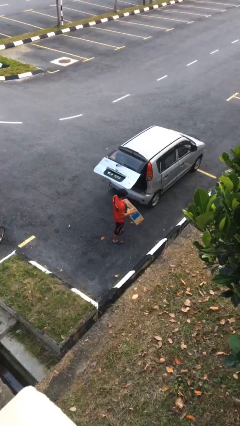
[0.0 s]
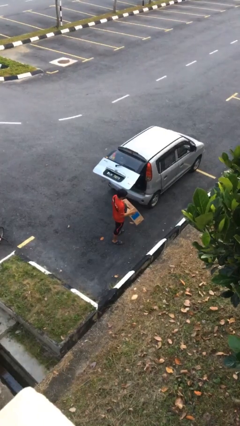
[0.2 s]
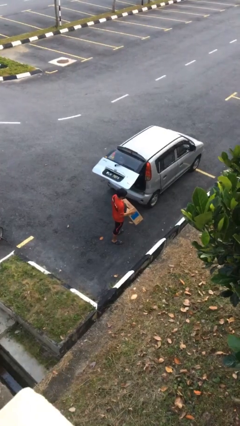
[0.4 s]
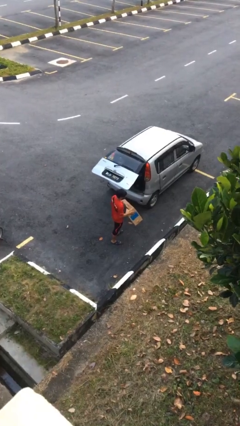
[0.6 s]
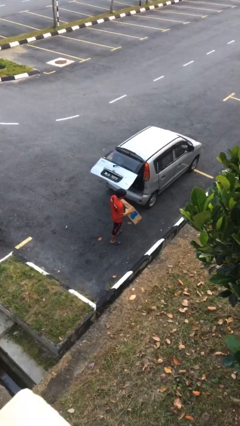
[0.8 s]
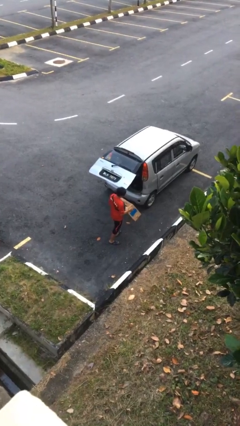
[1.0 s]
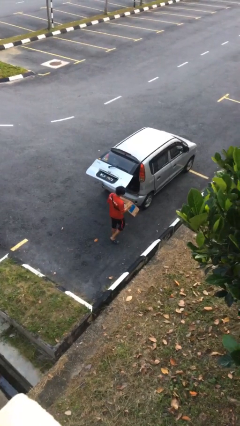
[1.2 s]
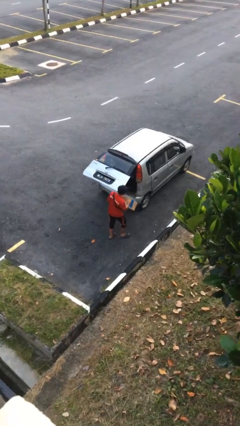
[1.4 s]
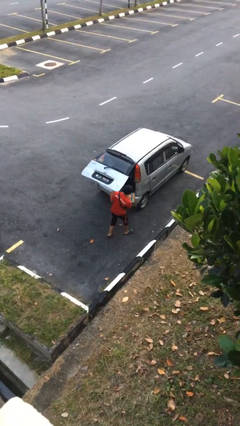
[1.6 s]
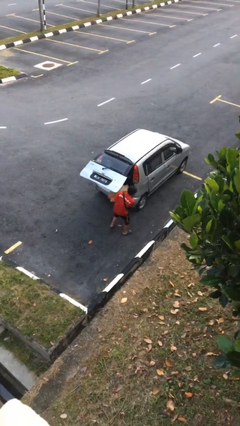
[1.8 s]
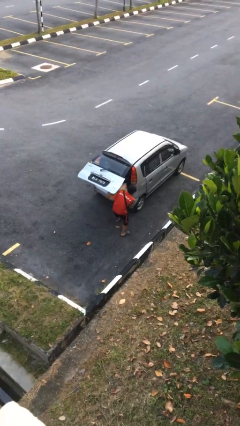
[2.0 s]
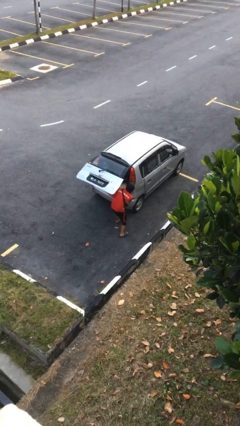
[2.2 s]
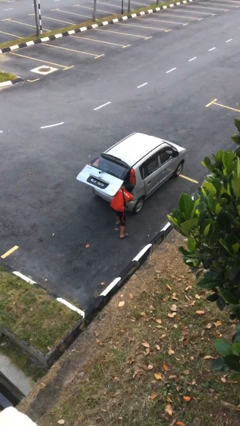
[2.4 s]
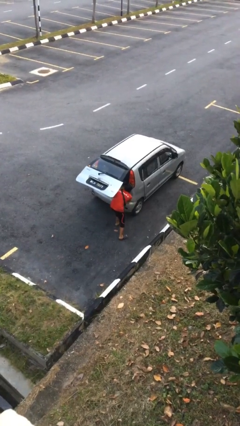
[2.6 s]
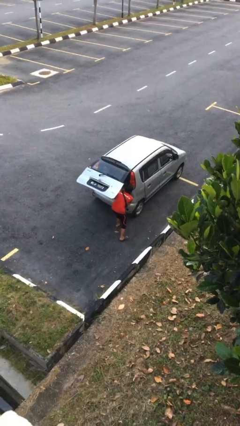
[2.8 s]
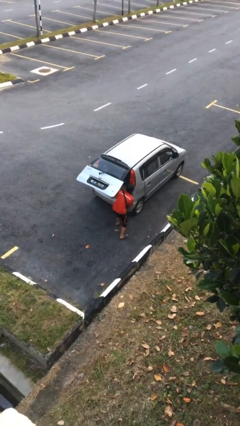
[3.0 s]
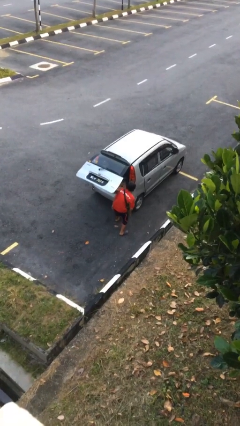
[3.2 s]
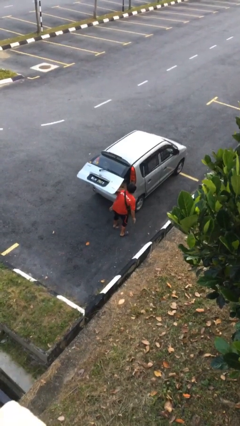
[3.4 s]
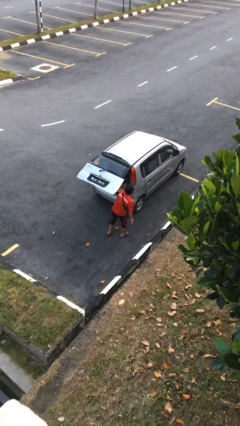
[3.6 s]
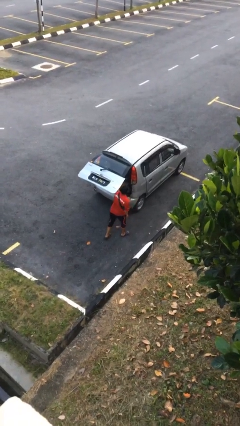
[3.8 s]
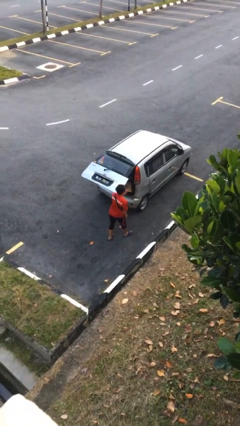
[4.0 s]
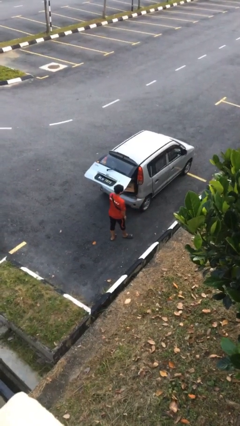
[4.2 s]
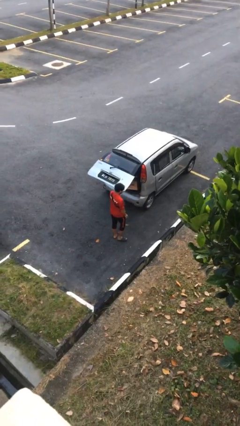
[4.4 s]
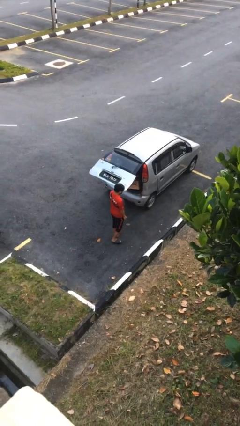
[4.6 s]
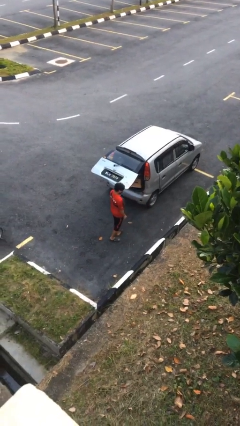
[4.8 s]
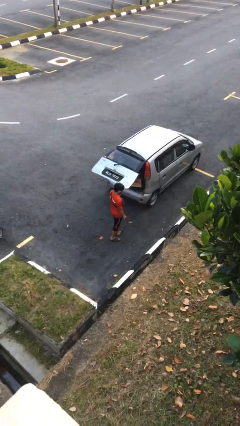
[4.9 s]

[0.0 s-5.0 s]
person loads car

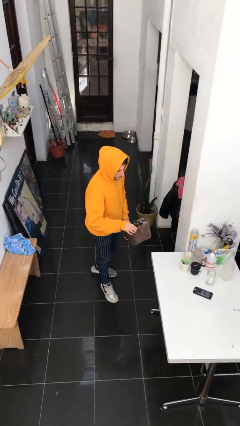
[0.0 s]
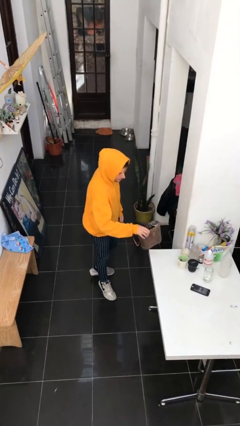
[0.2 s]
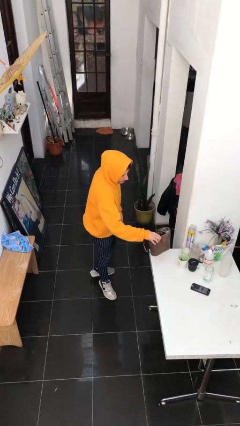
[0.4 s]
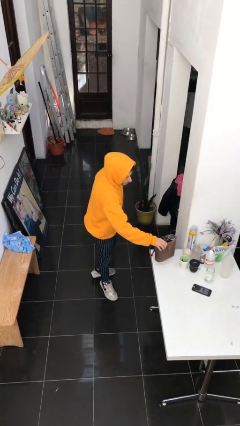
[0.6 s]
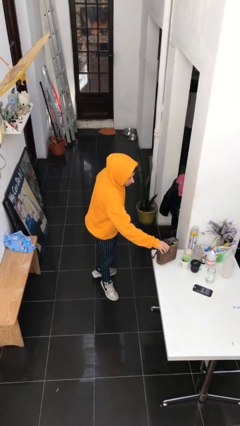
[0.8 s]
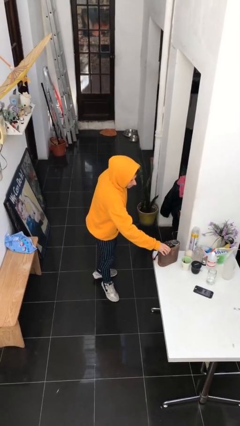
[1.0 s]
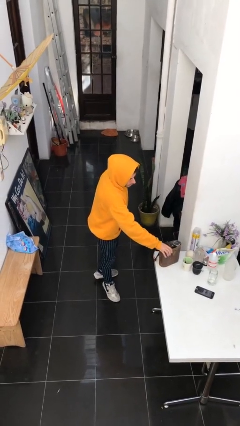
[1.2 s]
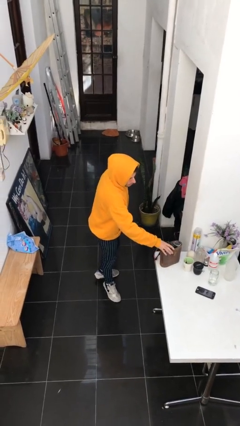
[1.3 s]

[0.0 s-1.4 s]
person puts down object on table

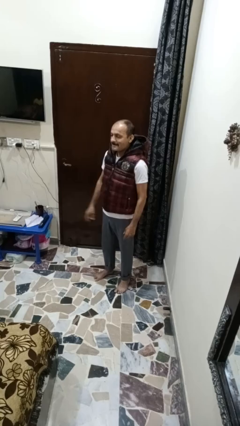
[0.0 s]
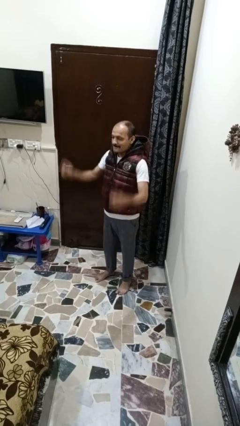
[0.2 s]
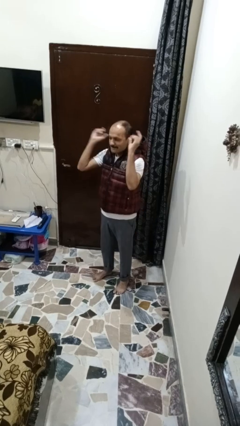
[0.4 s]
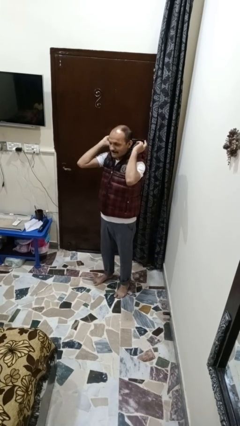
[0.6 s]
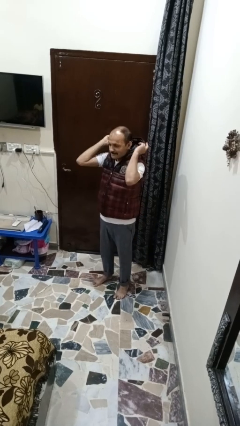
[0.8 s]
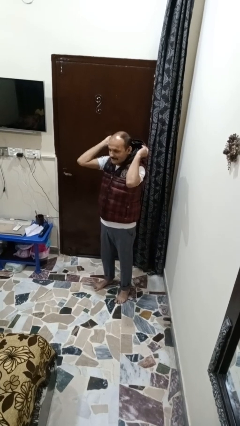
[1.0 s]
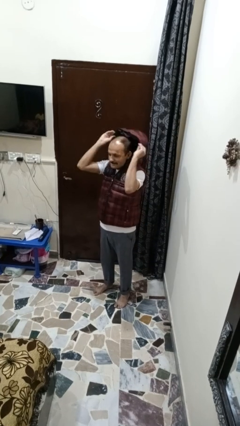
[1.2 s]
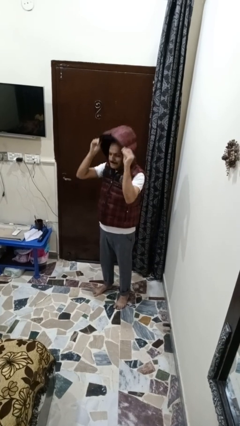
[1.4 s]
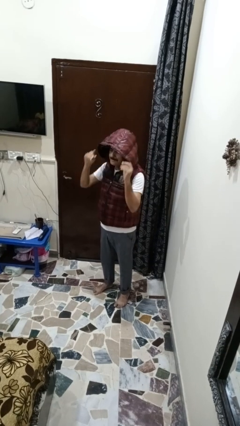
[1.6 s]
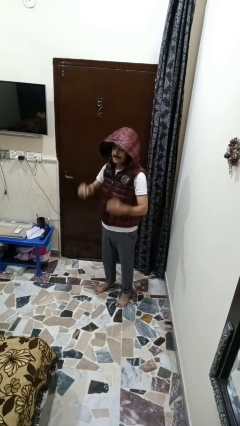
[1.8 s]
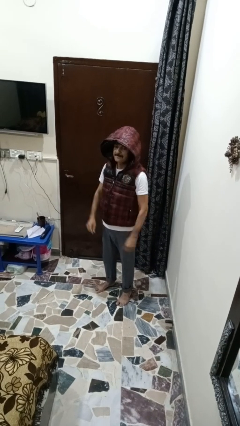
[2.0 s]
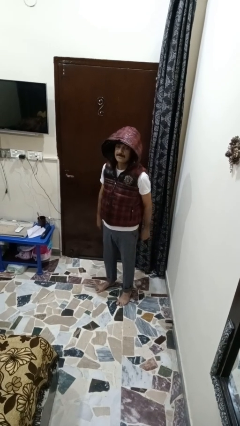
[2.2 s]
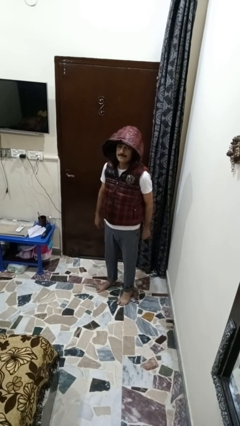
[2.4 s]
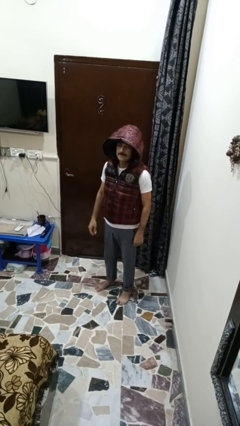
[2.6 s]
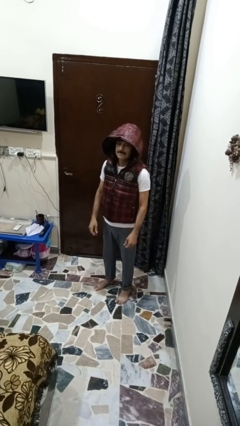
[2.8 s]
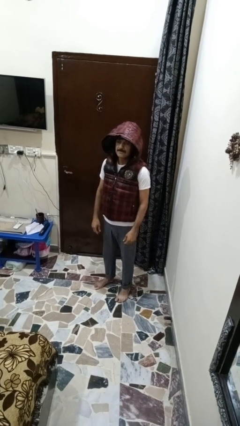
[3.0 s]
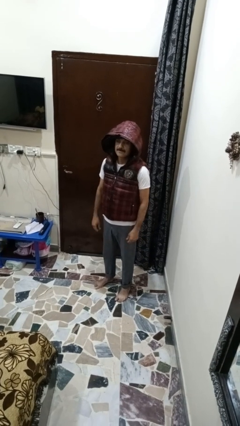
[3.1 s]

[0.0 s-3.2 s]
person puts on hoodie

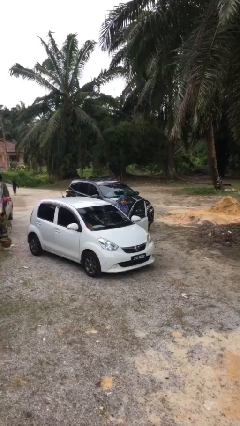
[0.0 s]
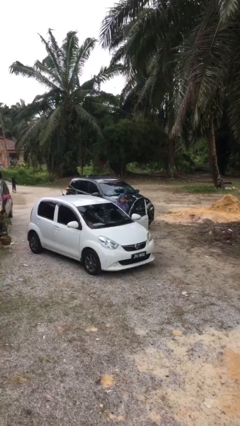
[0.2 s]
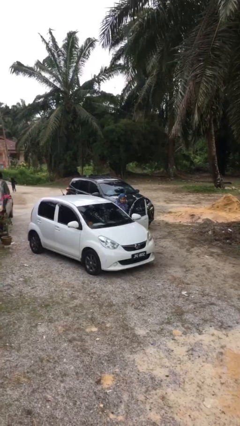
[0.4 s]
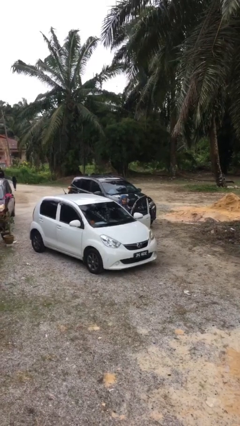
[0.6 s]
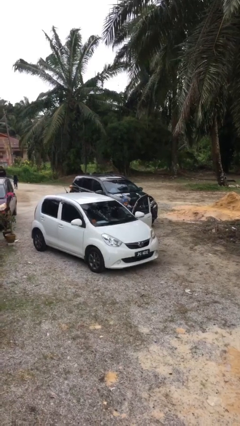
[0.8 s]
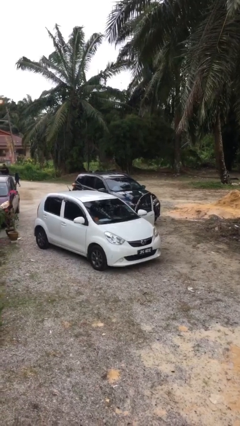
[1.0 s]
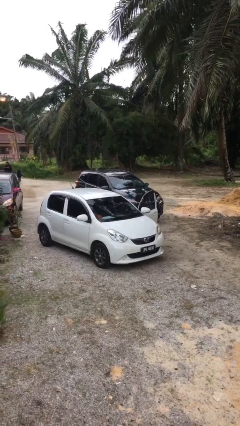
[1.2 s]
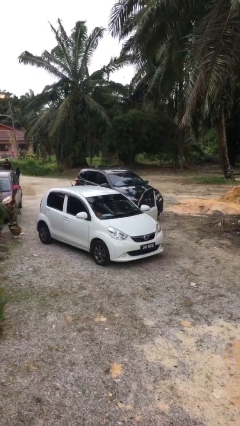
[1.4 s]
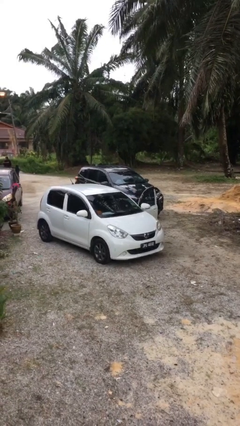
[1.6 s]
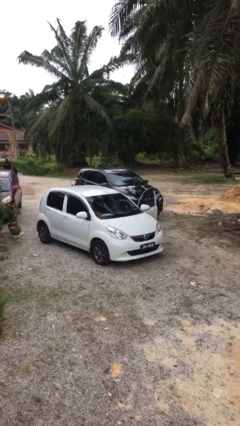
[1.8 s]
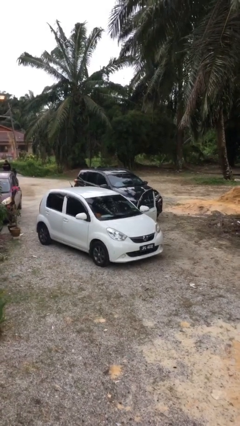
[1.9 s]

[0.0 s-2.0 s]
person enters car

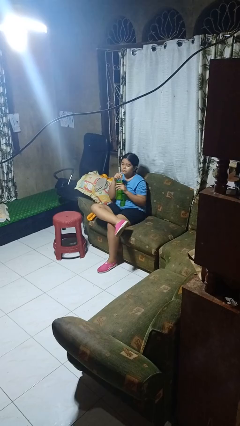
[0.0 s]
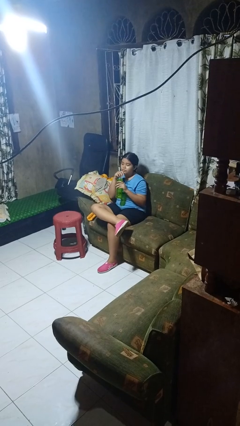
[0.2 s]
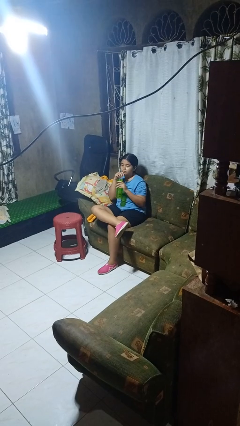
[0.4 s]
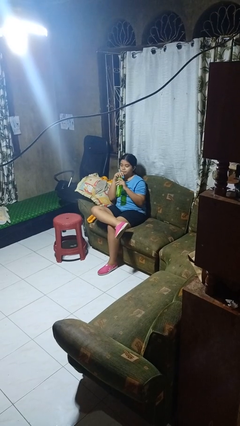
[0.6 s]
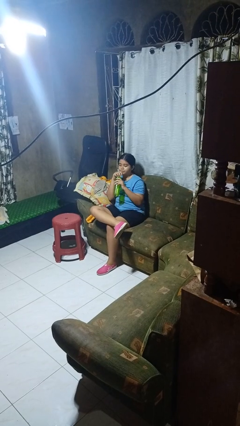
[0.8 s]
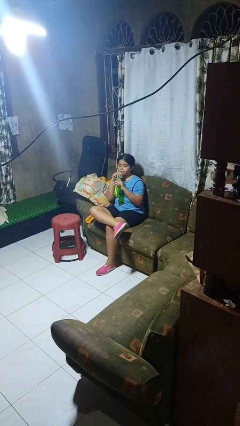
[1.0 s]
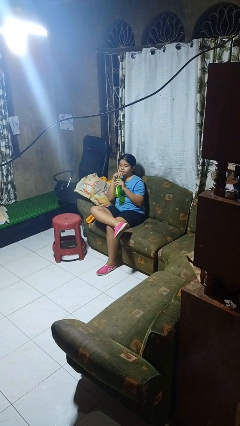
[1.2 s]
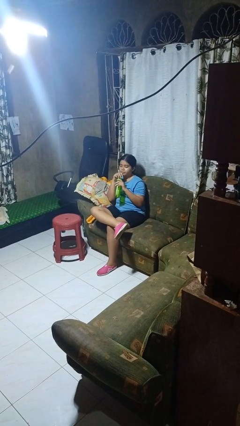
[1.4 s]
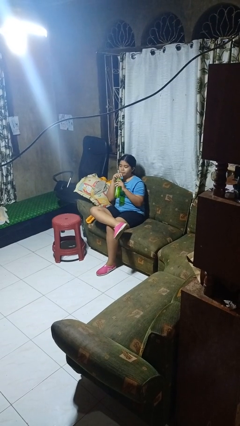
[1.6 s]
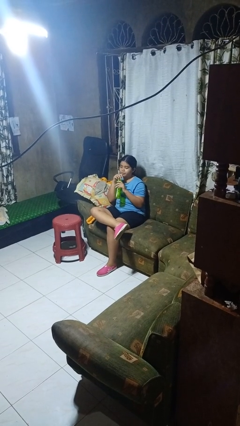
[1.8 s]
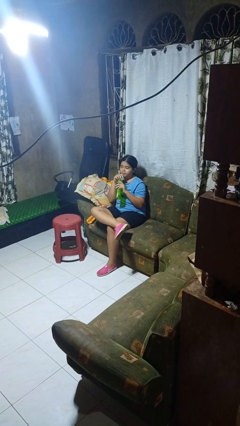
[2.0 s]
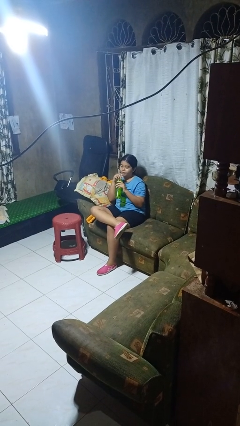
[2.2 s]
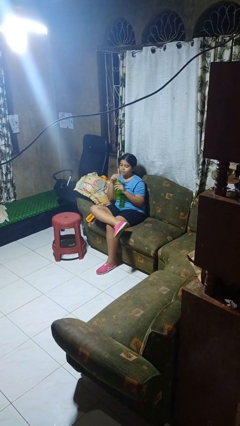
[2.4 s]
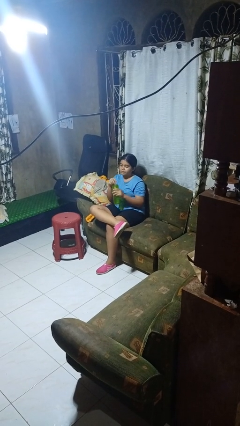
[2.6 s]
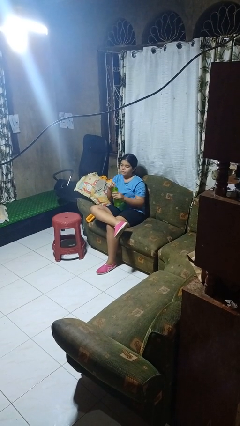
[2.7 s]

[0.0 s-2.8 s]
person drinks from straw

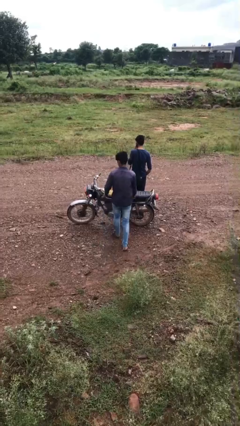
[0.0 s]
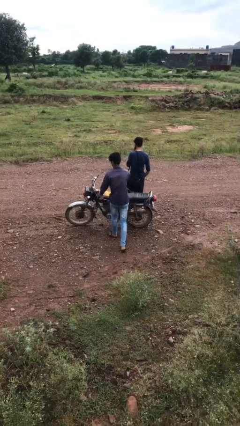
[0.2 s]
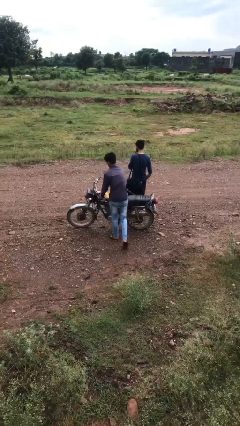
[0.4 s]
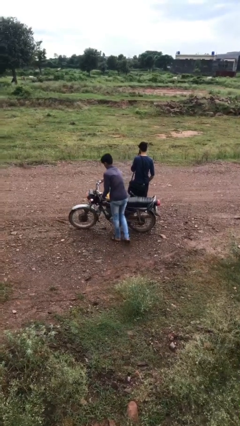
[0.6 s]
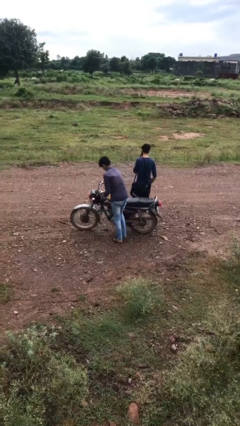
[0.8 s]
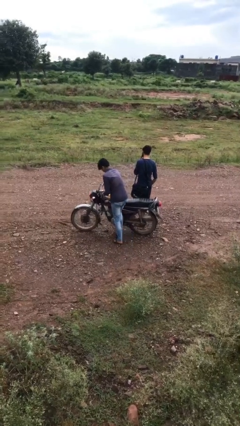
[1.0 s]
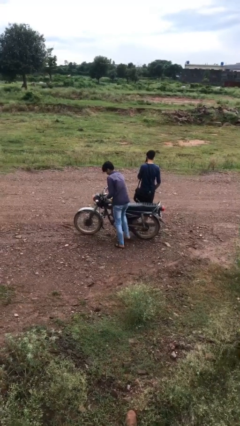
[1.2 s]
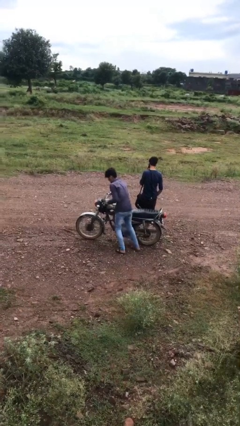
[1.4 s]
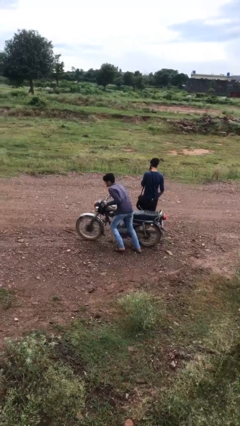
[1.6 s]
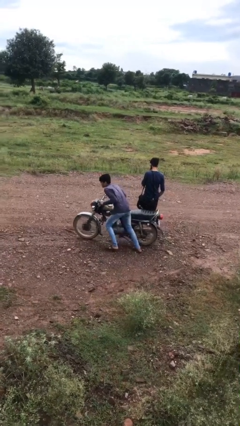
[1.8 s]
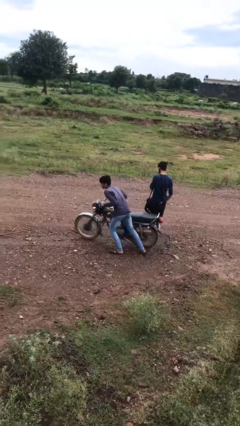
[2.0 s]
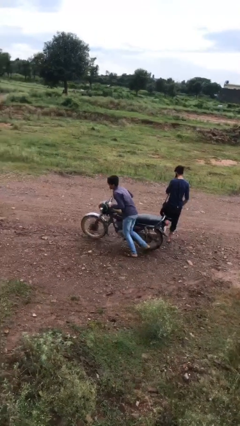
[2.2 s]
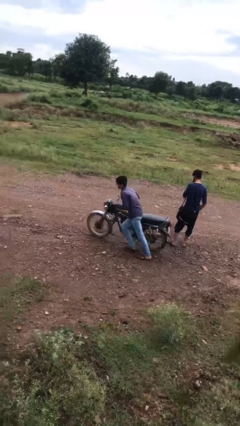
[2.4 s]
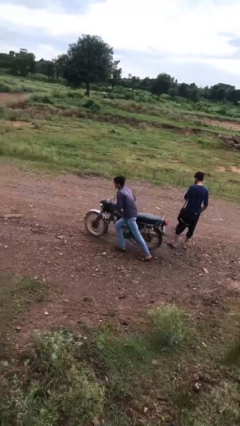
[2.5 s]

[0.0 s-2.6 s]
person steals object from person

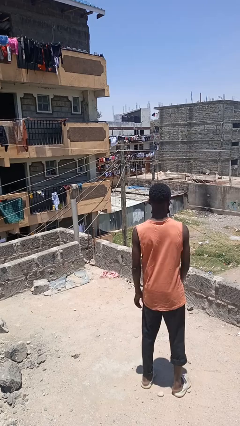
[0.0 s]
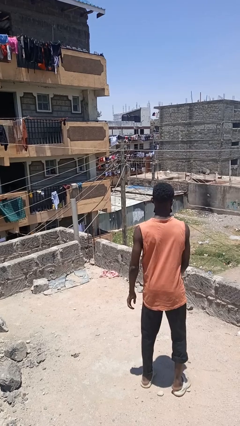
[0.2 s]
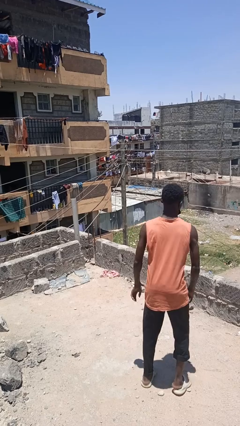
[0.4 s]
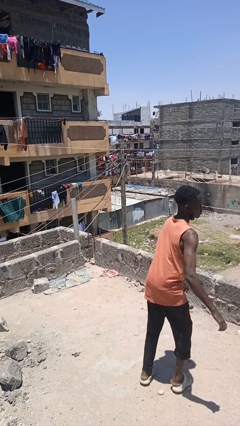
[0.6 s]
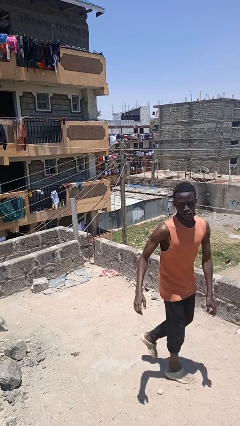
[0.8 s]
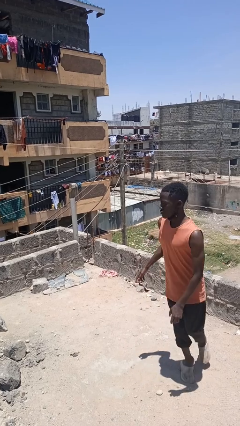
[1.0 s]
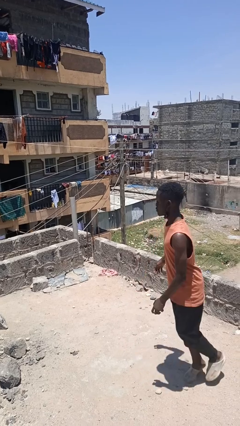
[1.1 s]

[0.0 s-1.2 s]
person twirls
